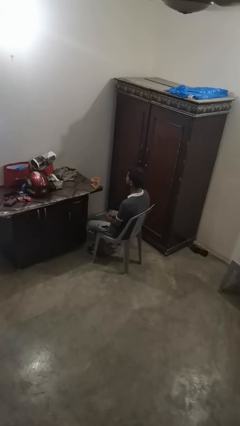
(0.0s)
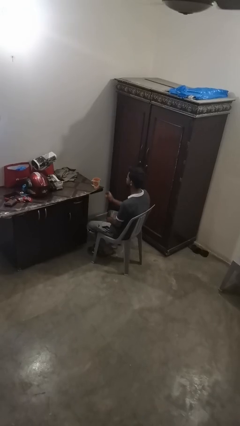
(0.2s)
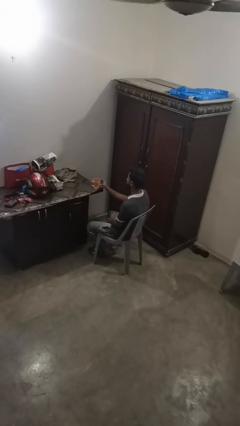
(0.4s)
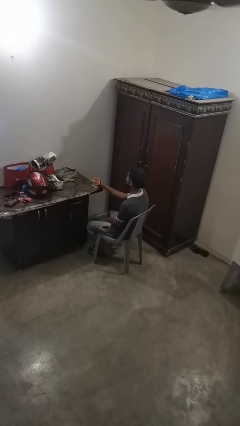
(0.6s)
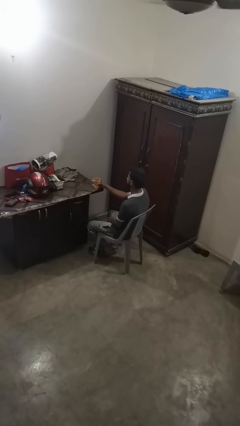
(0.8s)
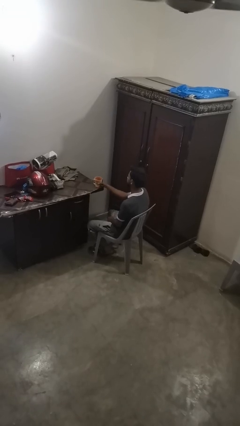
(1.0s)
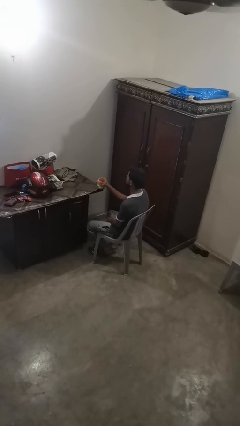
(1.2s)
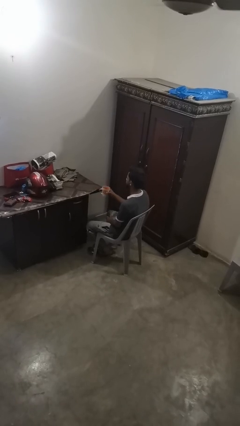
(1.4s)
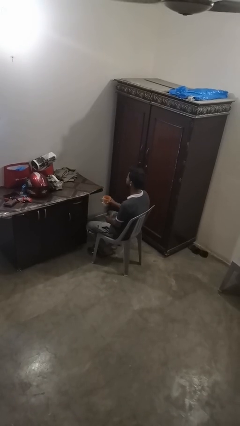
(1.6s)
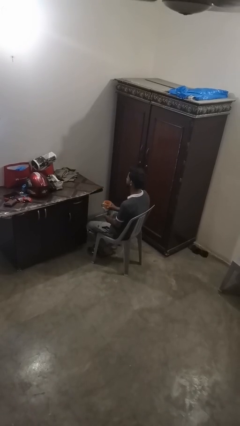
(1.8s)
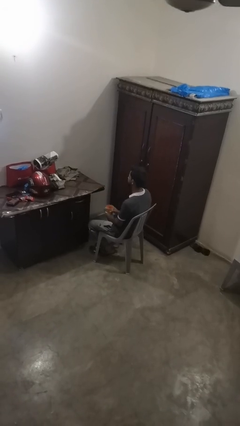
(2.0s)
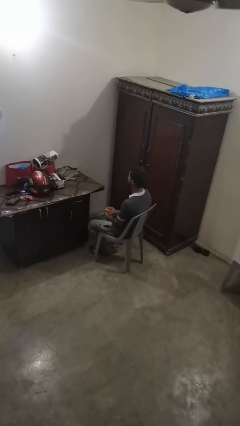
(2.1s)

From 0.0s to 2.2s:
person picks up object from table

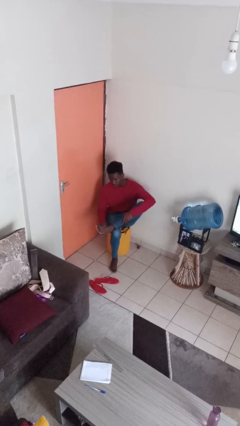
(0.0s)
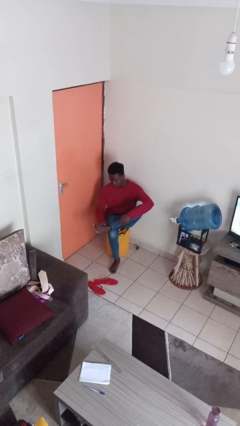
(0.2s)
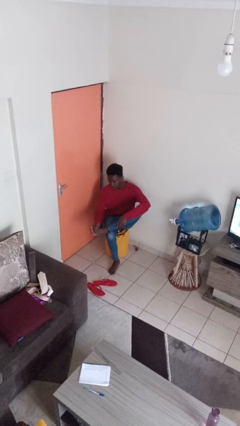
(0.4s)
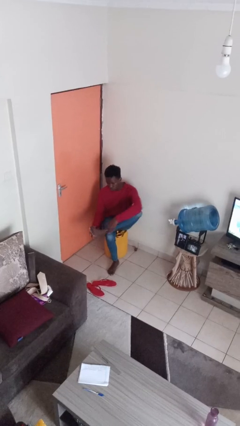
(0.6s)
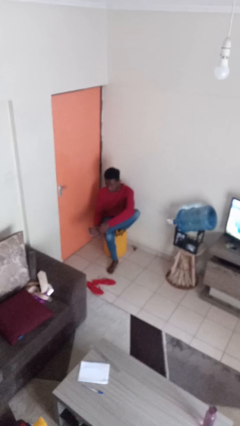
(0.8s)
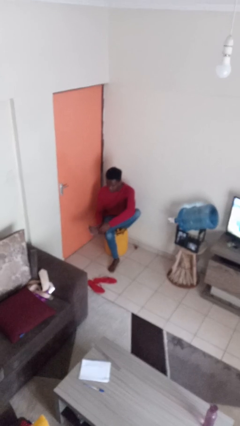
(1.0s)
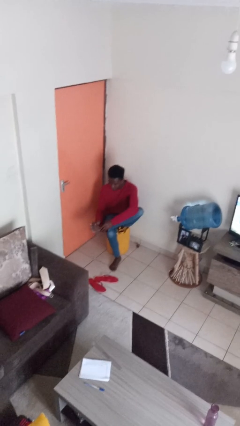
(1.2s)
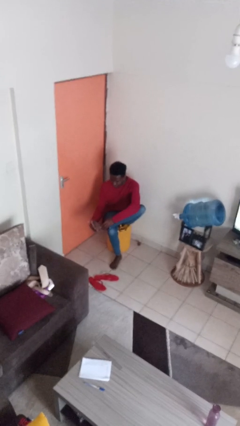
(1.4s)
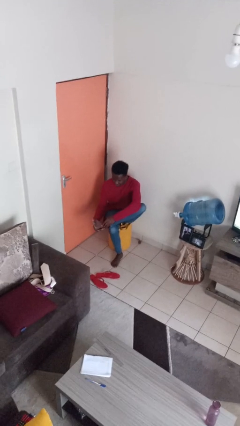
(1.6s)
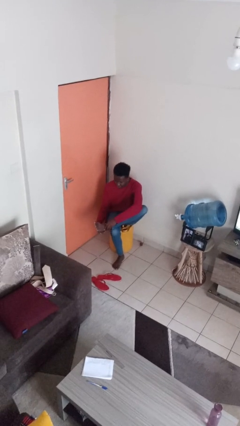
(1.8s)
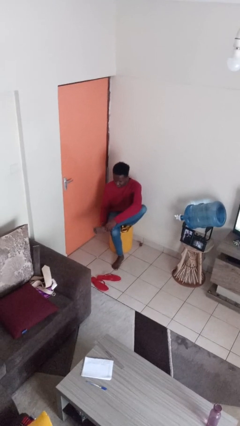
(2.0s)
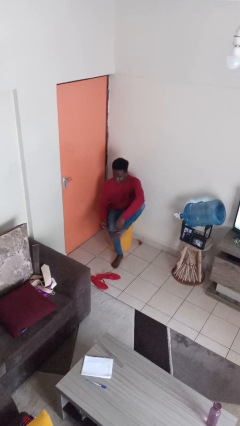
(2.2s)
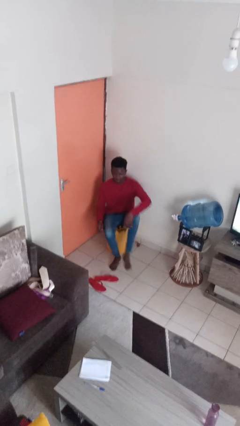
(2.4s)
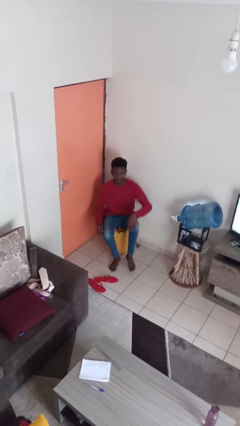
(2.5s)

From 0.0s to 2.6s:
person rubs foot

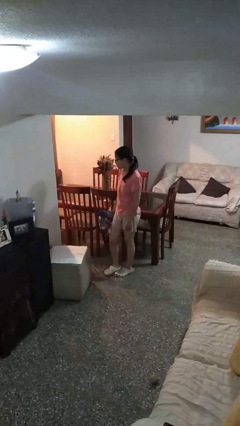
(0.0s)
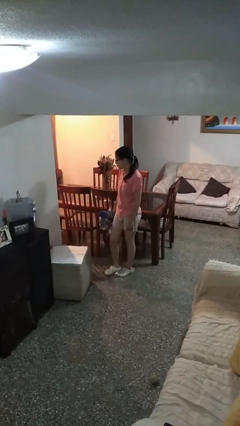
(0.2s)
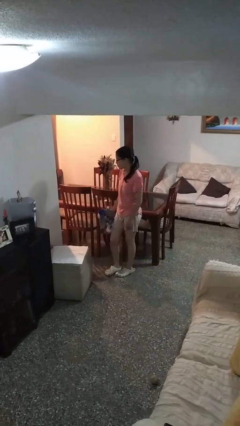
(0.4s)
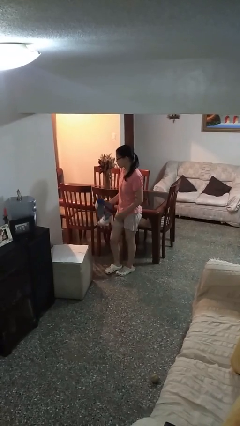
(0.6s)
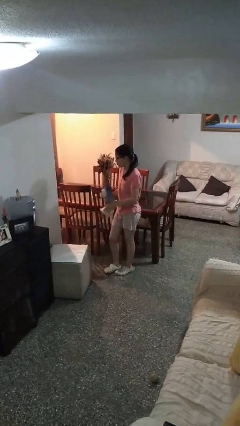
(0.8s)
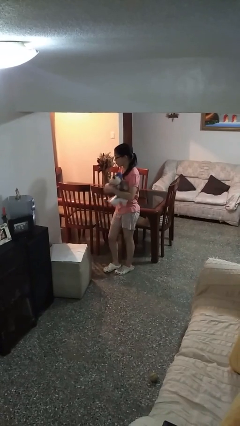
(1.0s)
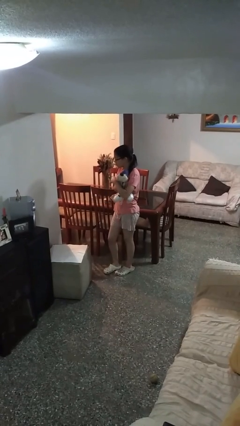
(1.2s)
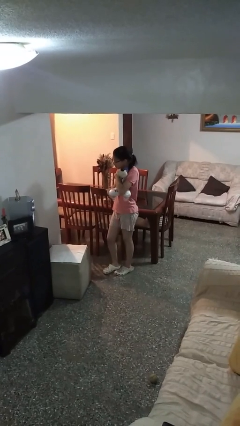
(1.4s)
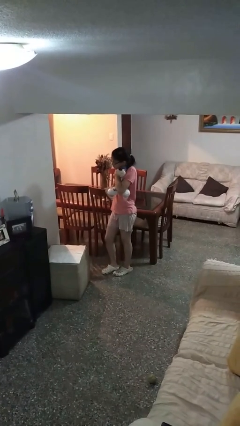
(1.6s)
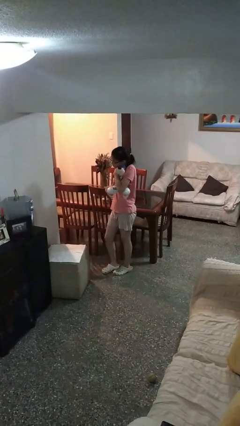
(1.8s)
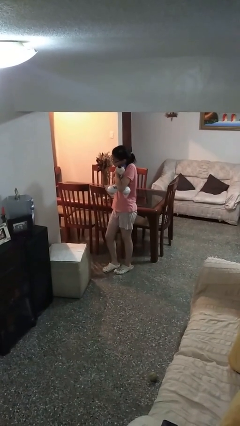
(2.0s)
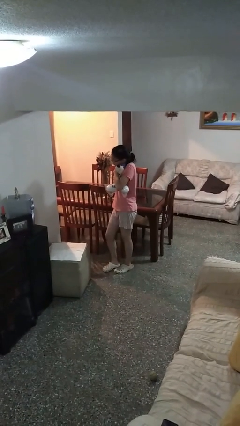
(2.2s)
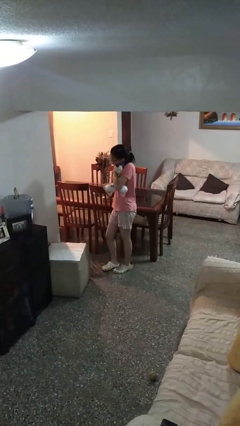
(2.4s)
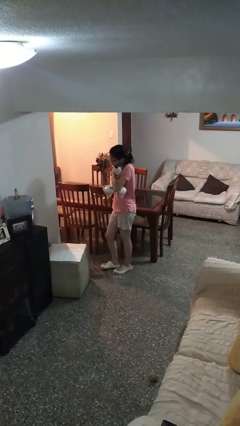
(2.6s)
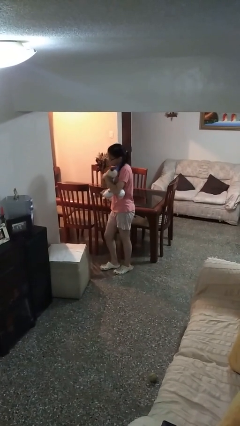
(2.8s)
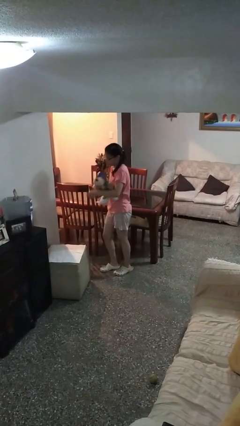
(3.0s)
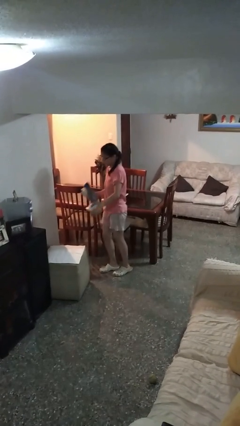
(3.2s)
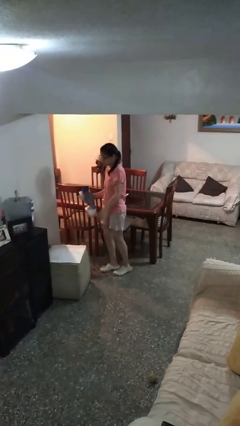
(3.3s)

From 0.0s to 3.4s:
person hugs stuffed animal

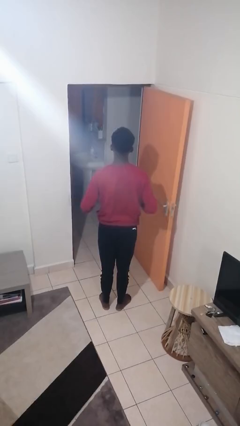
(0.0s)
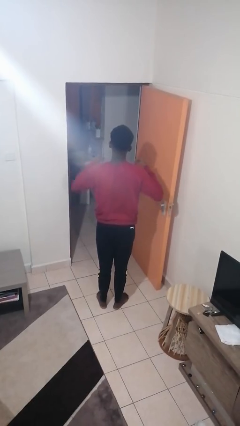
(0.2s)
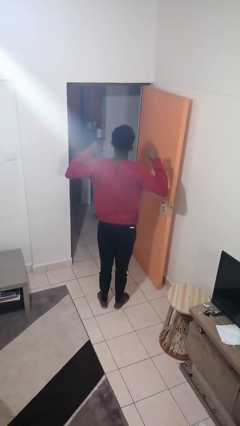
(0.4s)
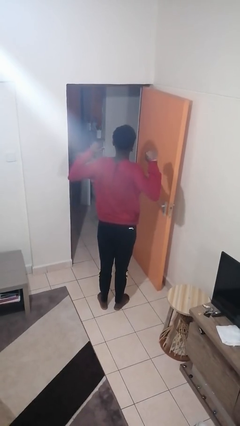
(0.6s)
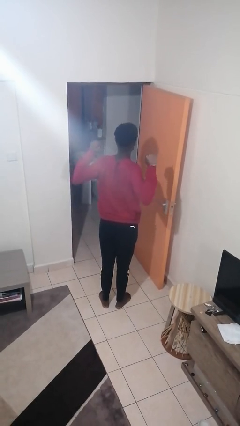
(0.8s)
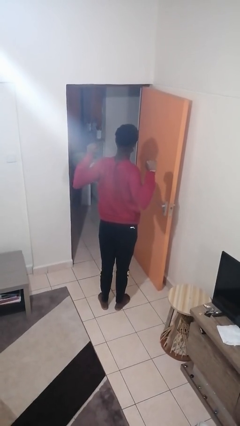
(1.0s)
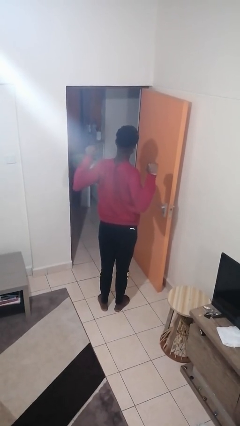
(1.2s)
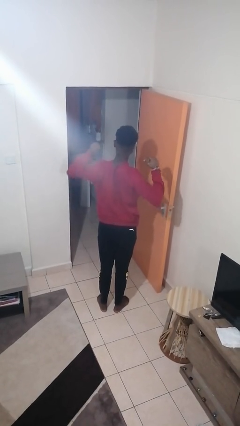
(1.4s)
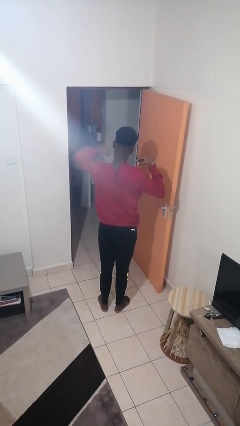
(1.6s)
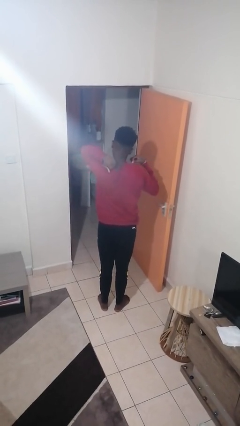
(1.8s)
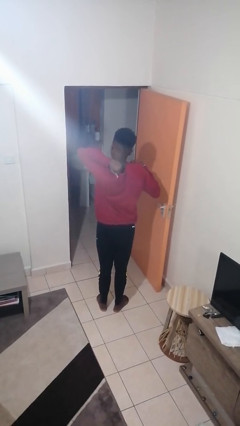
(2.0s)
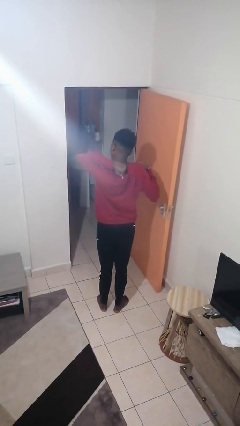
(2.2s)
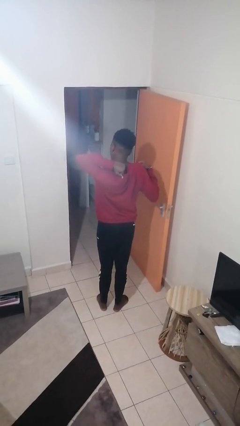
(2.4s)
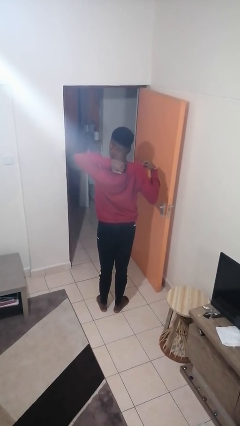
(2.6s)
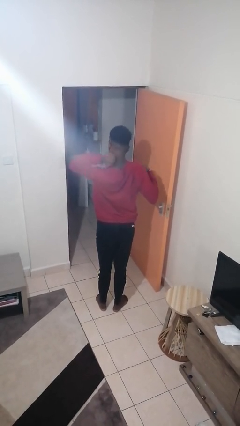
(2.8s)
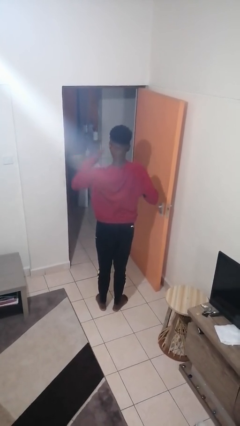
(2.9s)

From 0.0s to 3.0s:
person stretches arms to side

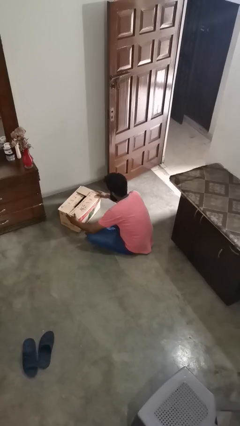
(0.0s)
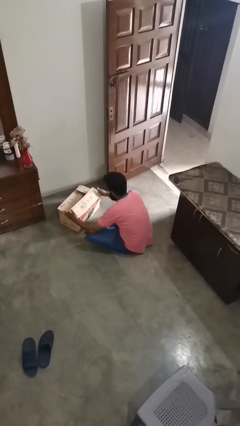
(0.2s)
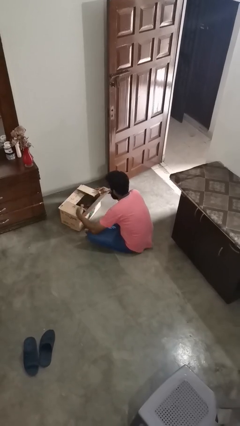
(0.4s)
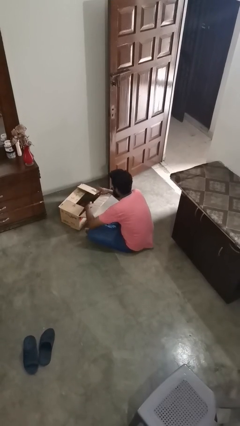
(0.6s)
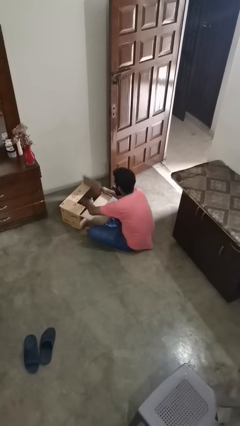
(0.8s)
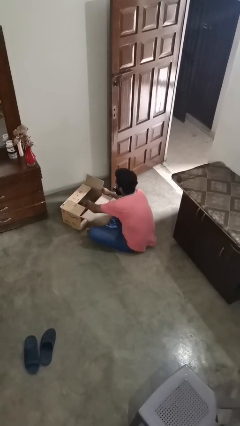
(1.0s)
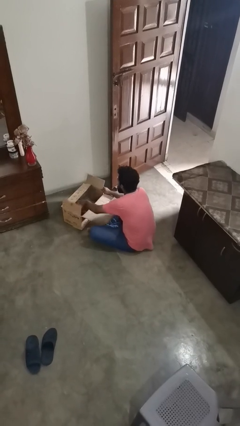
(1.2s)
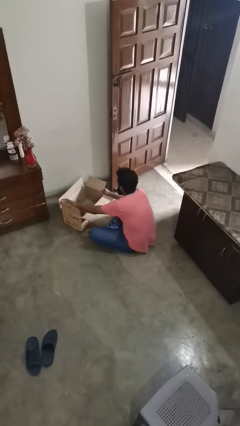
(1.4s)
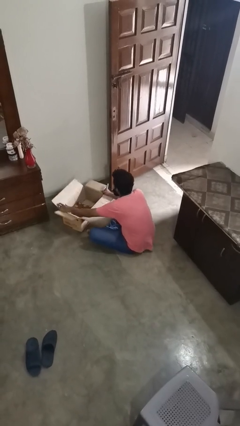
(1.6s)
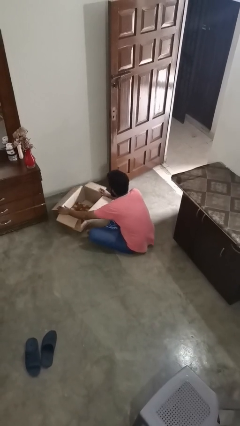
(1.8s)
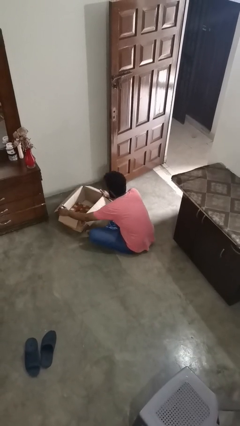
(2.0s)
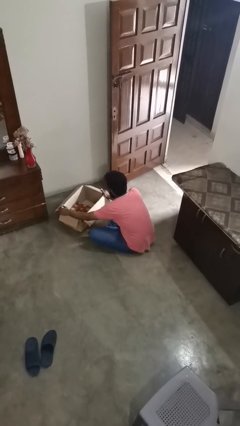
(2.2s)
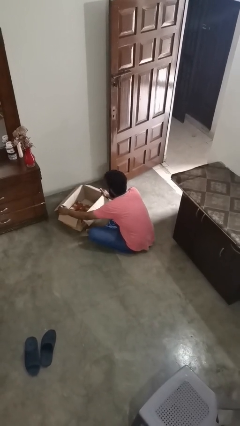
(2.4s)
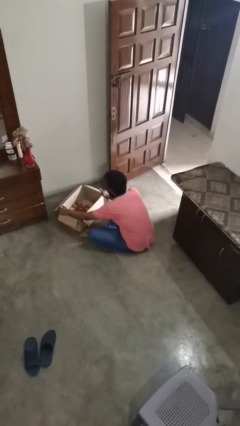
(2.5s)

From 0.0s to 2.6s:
person opens box

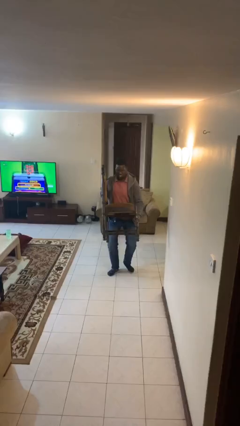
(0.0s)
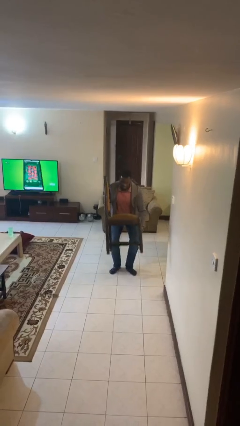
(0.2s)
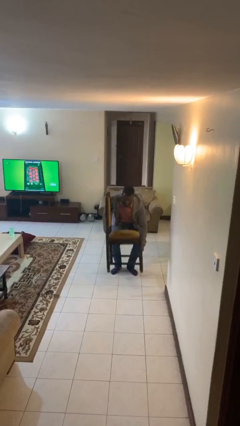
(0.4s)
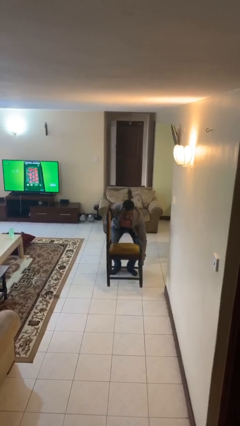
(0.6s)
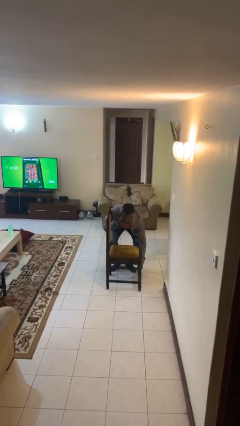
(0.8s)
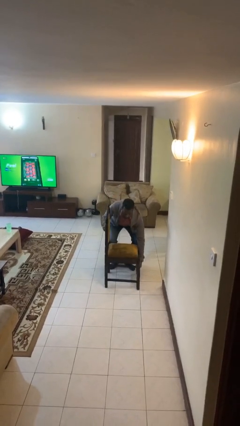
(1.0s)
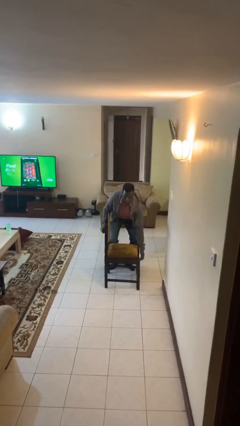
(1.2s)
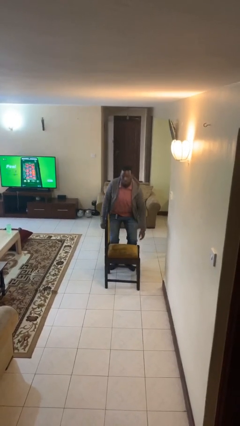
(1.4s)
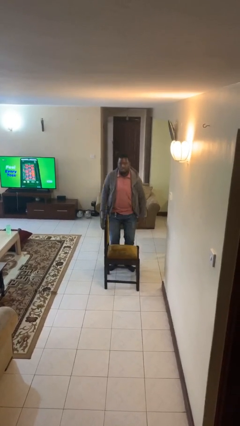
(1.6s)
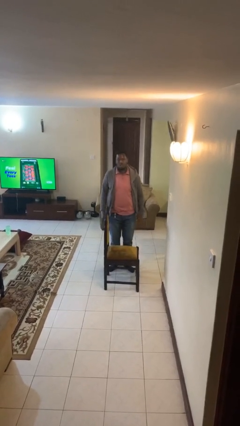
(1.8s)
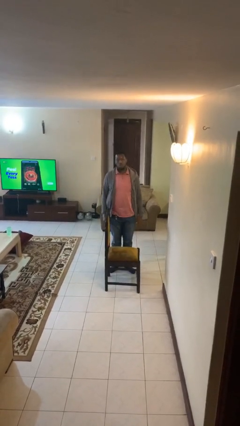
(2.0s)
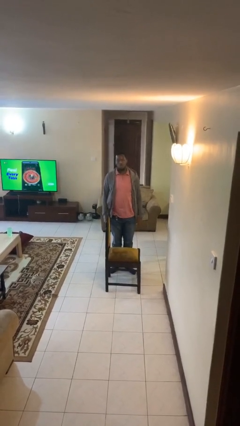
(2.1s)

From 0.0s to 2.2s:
person puts down object on floor

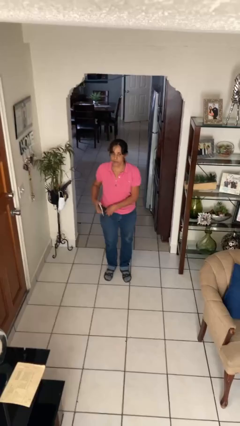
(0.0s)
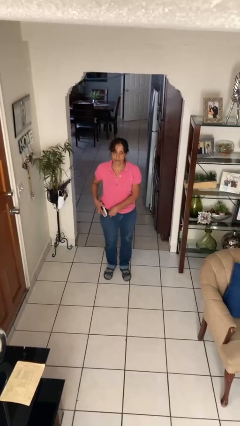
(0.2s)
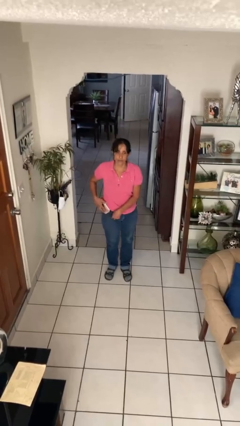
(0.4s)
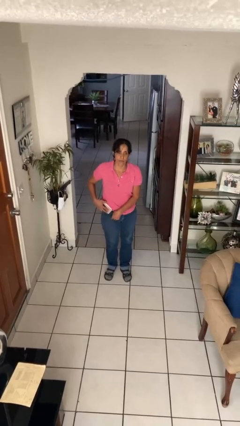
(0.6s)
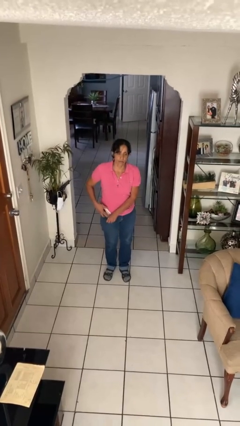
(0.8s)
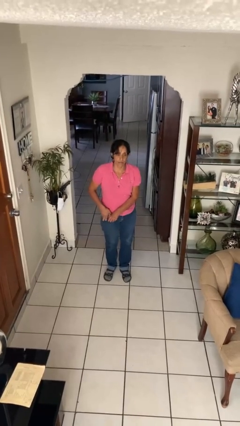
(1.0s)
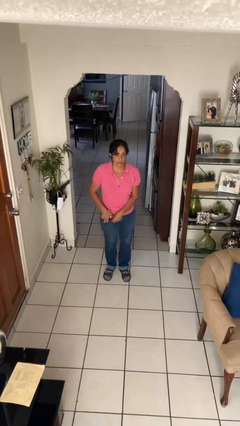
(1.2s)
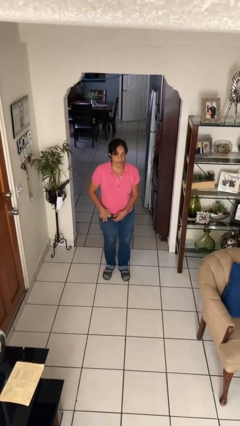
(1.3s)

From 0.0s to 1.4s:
person puts phone into pocket
